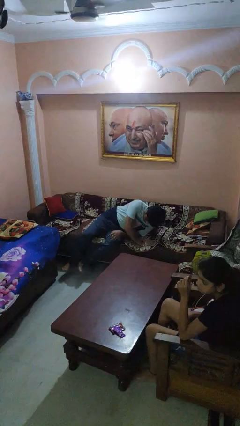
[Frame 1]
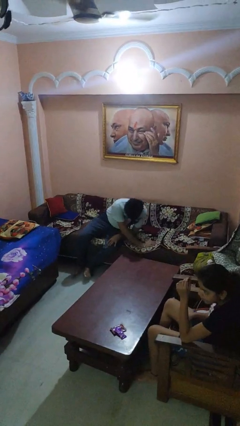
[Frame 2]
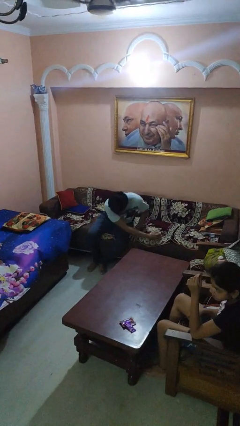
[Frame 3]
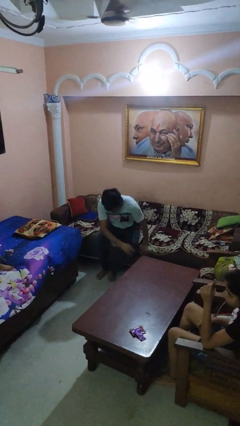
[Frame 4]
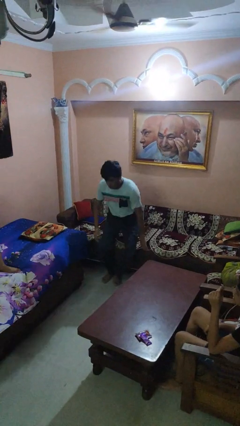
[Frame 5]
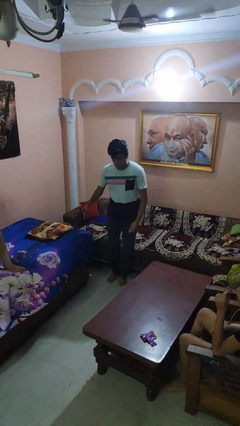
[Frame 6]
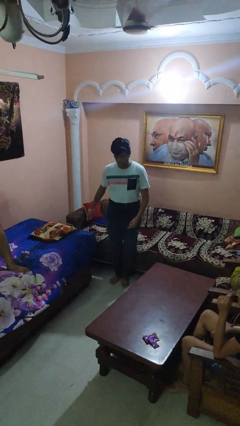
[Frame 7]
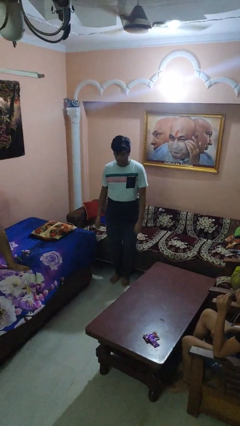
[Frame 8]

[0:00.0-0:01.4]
person stands up

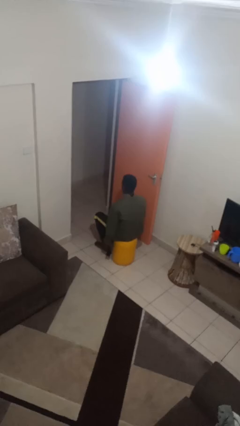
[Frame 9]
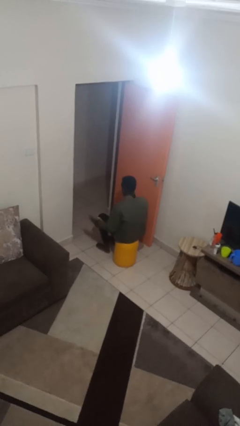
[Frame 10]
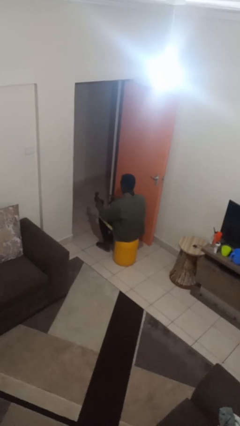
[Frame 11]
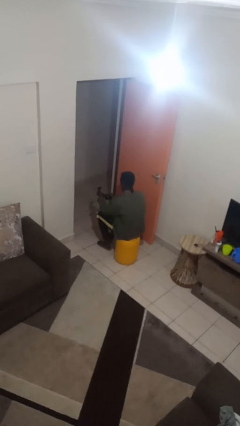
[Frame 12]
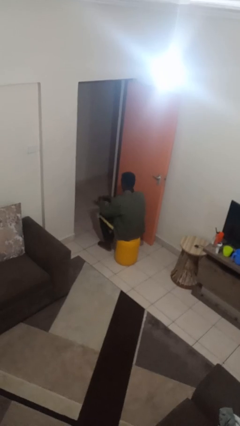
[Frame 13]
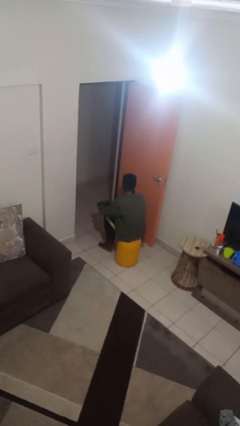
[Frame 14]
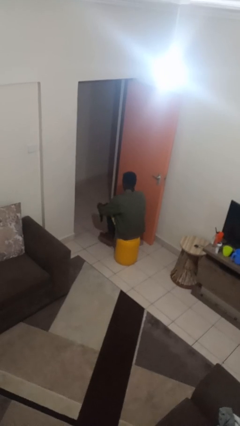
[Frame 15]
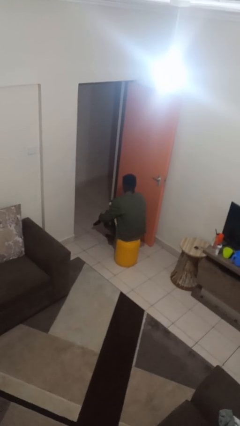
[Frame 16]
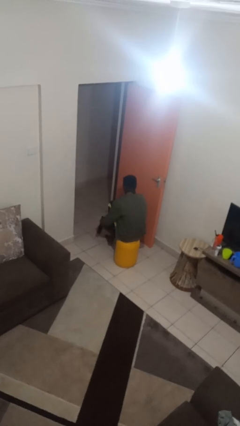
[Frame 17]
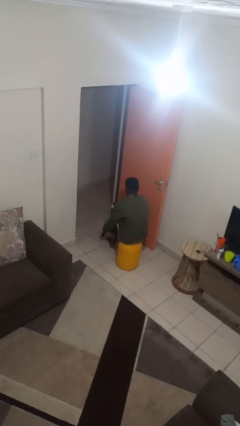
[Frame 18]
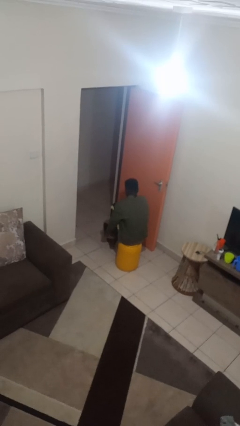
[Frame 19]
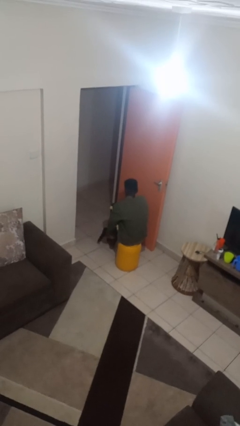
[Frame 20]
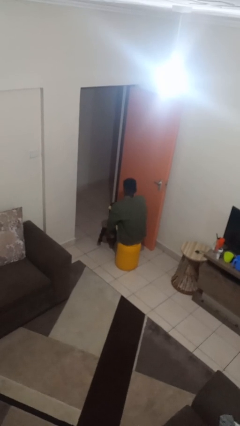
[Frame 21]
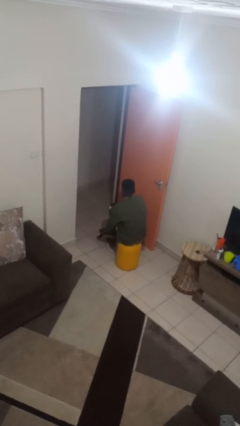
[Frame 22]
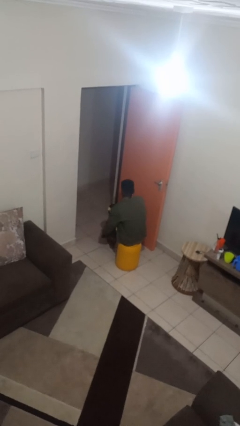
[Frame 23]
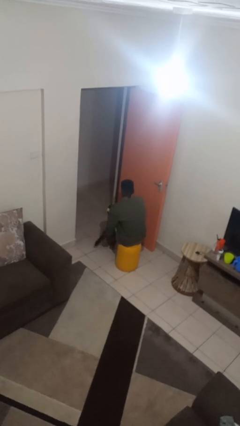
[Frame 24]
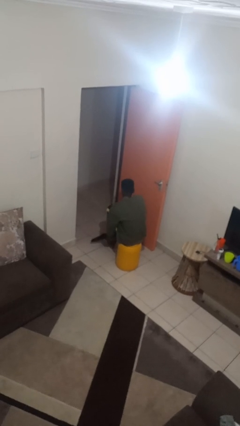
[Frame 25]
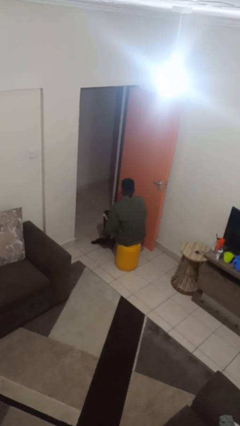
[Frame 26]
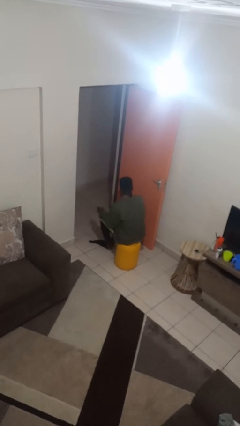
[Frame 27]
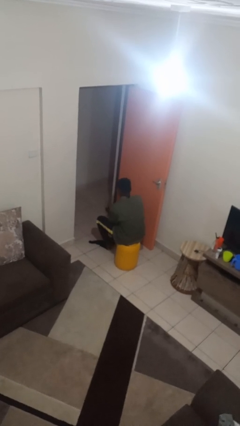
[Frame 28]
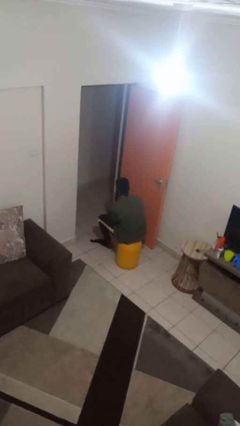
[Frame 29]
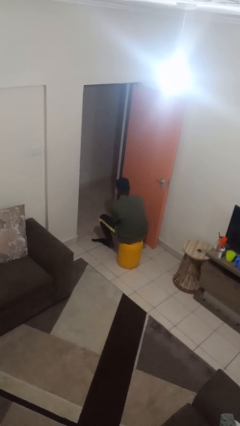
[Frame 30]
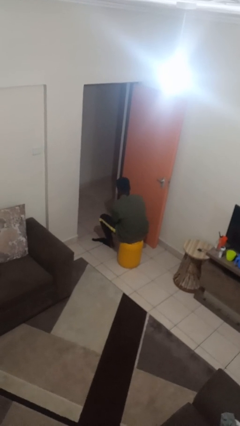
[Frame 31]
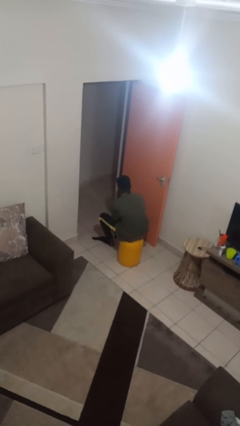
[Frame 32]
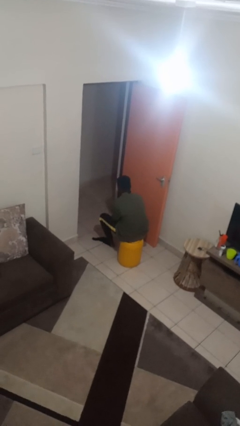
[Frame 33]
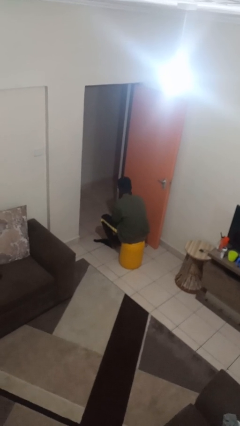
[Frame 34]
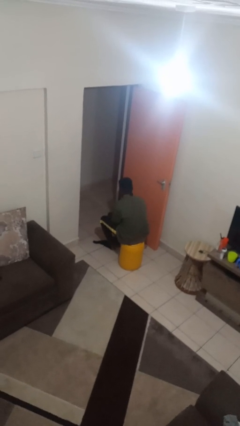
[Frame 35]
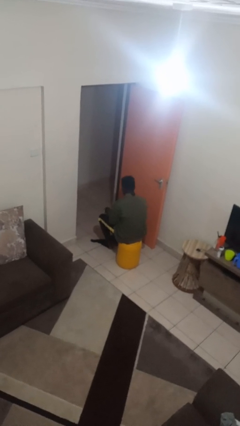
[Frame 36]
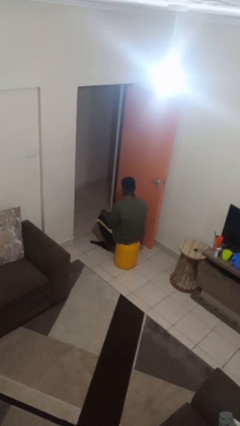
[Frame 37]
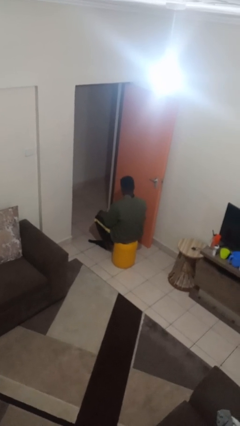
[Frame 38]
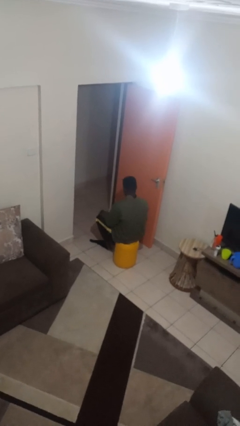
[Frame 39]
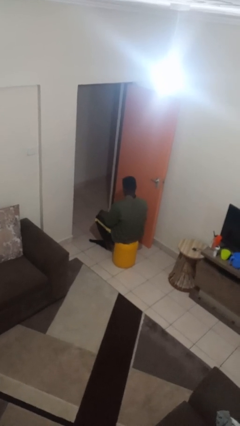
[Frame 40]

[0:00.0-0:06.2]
person puts on socks

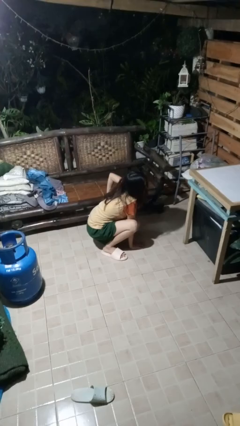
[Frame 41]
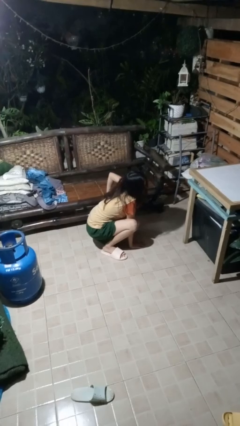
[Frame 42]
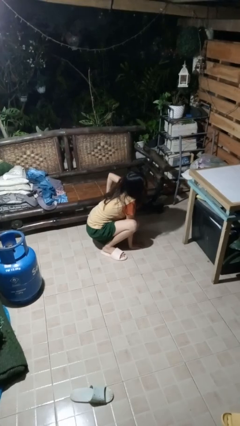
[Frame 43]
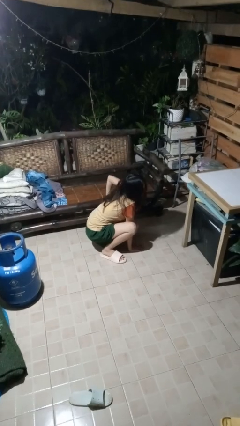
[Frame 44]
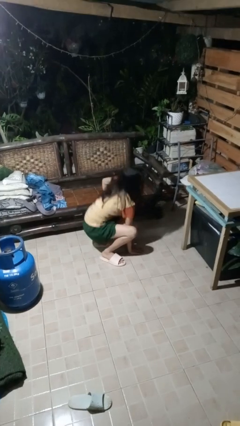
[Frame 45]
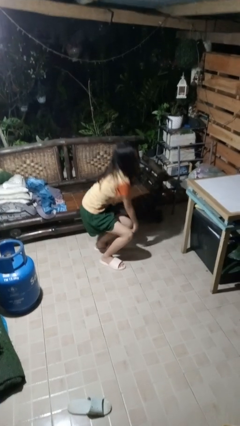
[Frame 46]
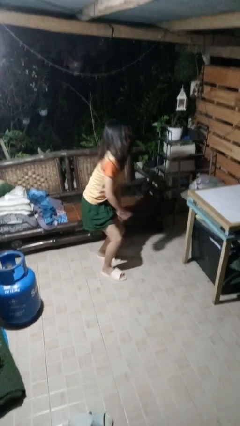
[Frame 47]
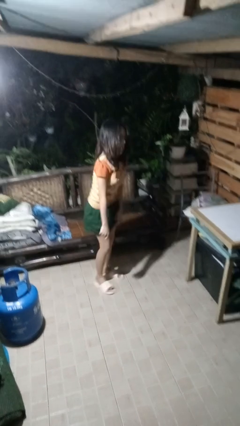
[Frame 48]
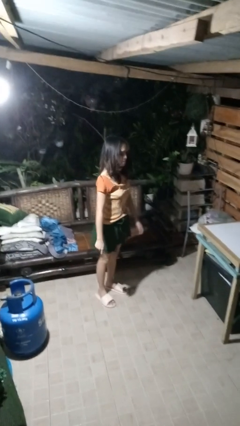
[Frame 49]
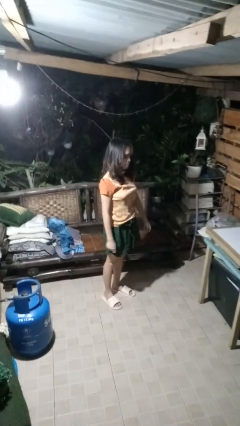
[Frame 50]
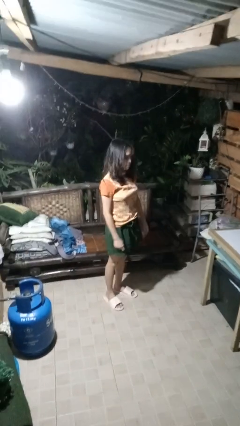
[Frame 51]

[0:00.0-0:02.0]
person stands up from floor

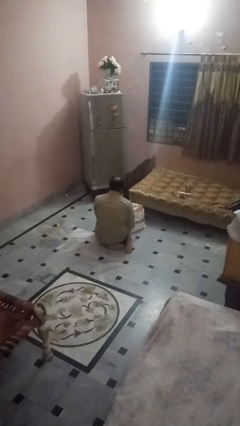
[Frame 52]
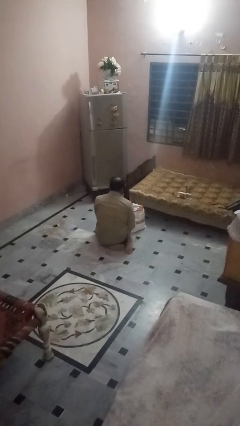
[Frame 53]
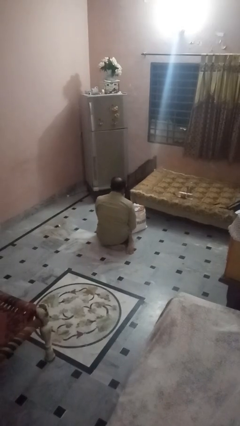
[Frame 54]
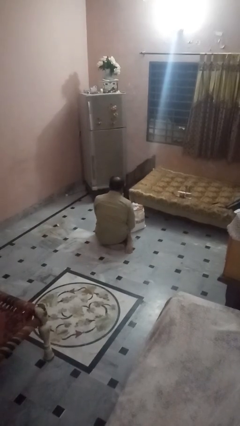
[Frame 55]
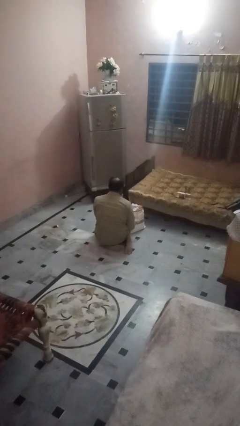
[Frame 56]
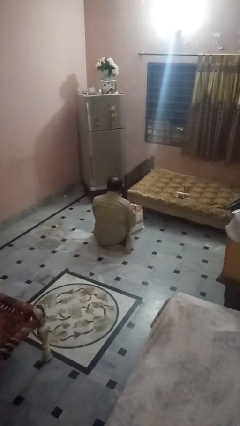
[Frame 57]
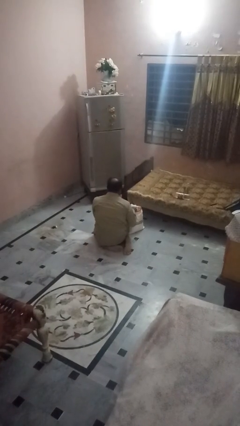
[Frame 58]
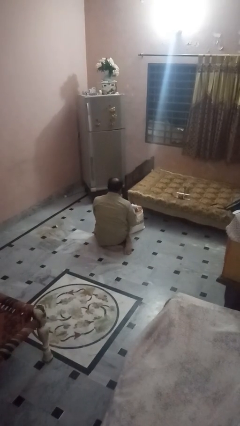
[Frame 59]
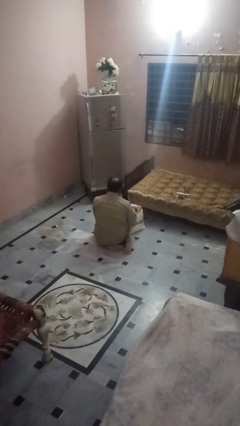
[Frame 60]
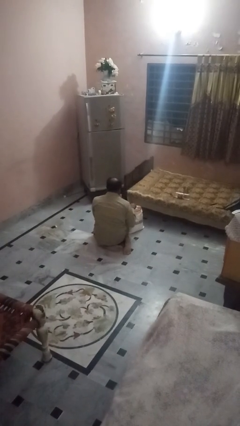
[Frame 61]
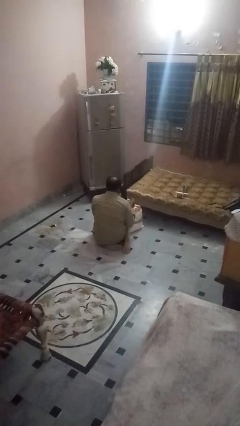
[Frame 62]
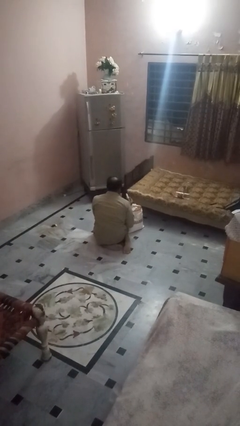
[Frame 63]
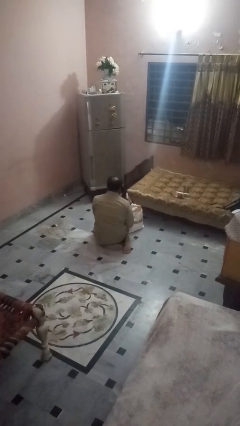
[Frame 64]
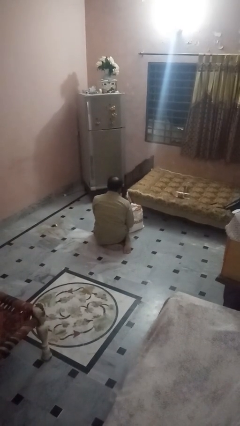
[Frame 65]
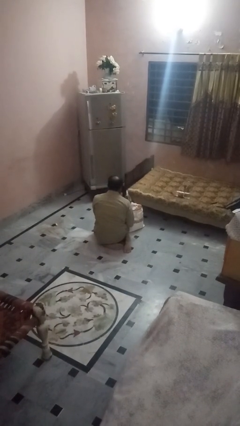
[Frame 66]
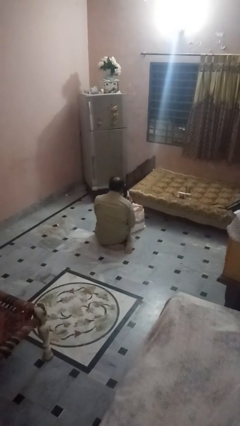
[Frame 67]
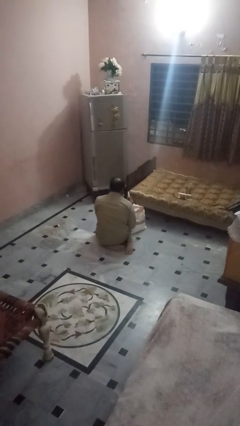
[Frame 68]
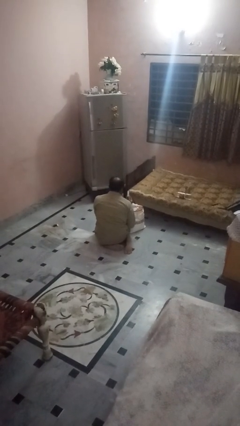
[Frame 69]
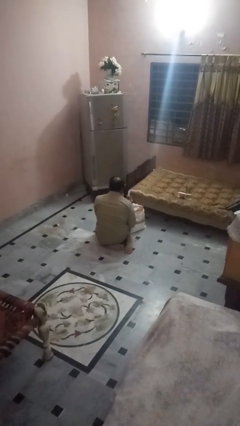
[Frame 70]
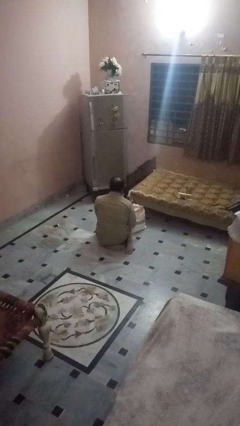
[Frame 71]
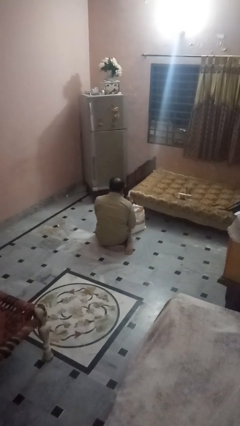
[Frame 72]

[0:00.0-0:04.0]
person takes object from bag

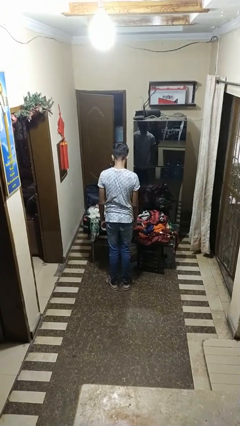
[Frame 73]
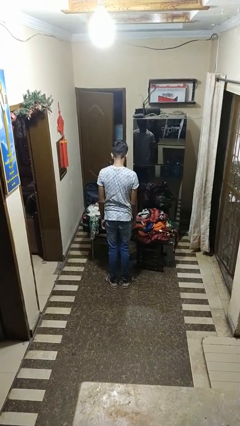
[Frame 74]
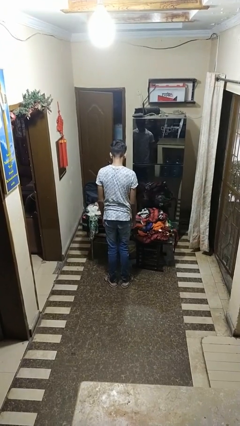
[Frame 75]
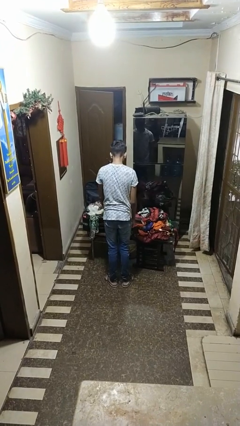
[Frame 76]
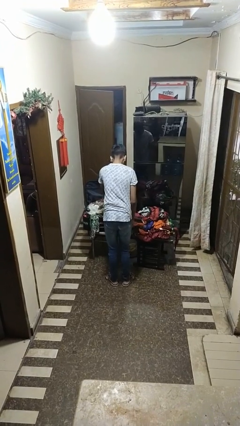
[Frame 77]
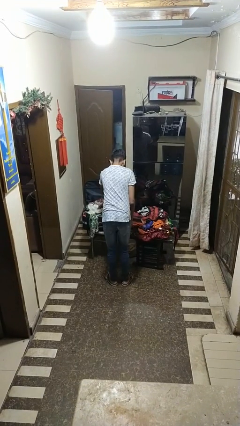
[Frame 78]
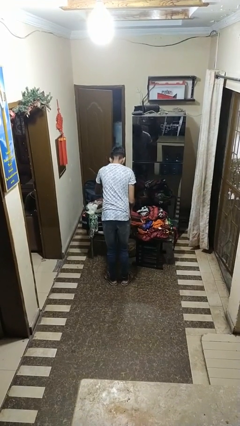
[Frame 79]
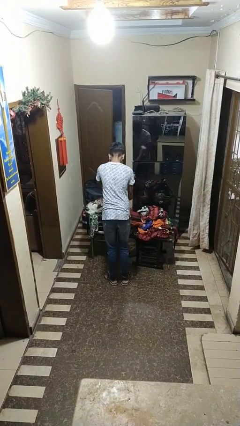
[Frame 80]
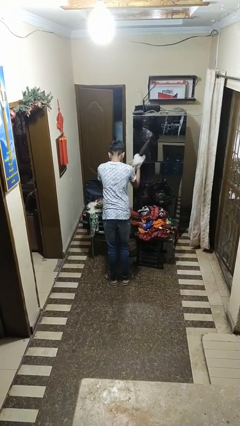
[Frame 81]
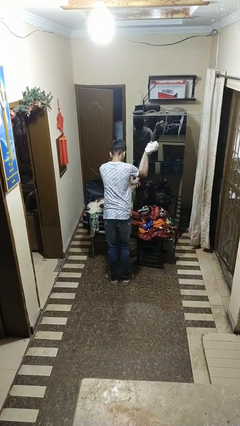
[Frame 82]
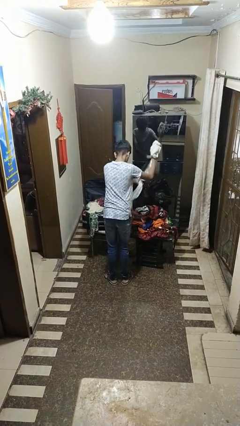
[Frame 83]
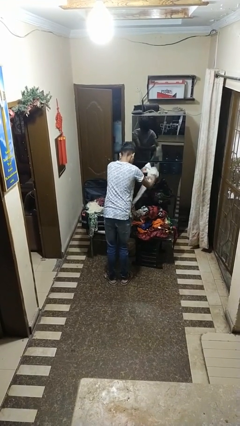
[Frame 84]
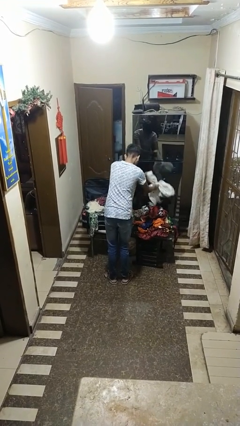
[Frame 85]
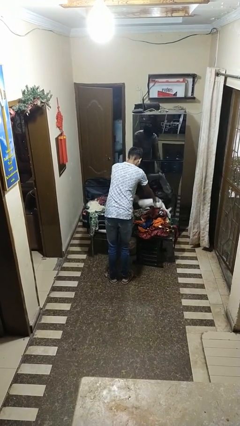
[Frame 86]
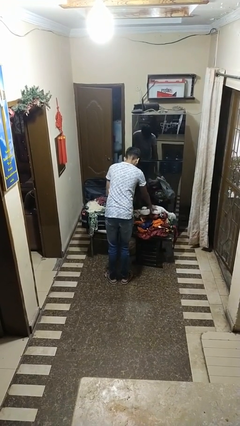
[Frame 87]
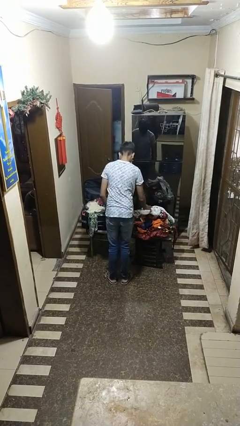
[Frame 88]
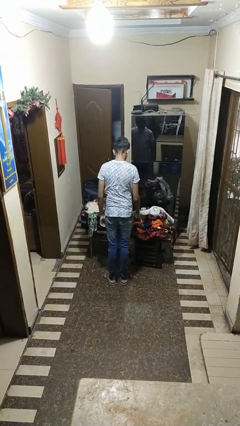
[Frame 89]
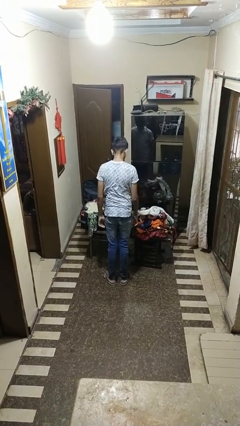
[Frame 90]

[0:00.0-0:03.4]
person unloads clothes from suitcase
